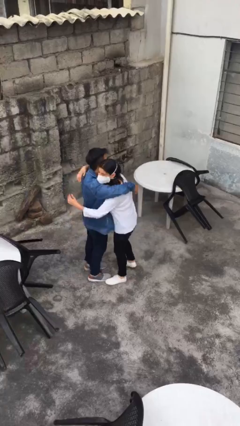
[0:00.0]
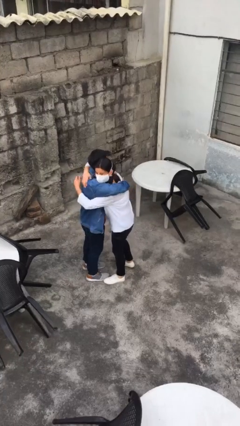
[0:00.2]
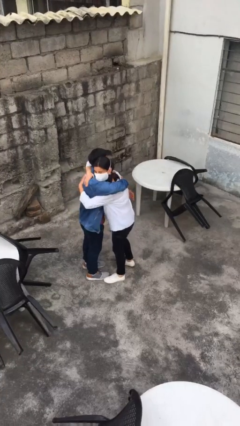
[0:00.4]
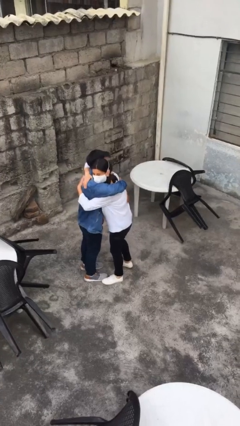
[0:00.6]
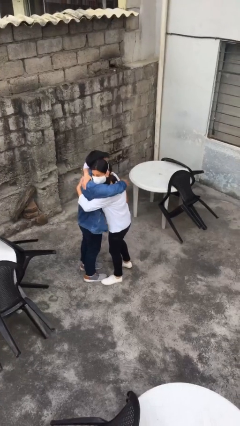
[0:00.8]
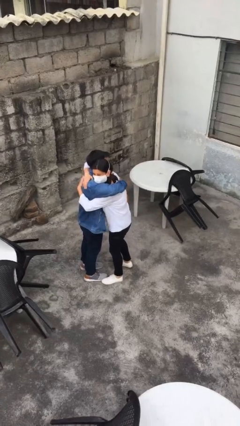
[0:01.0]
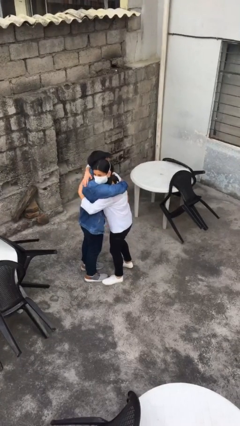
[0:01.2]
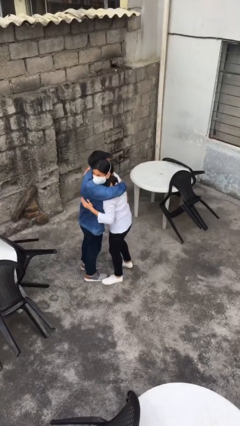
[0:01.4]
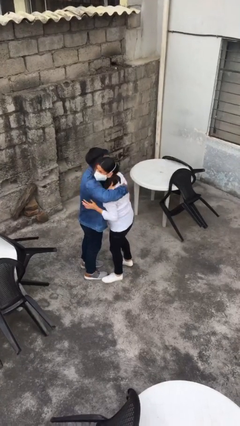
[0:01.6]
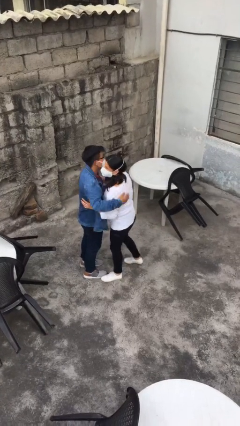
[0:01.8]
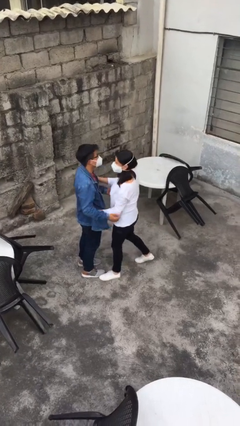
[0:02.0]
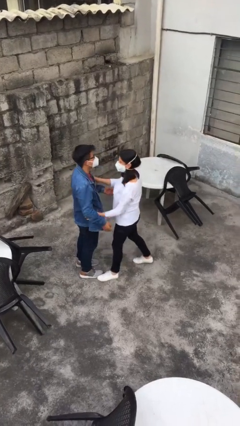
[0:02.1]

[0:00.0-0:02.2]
person embraces person

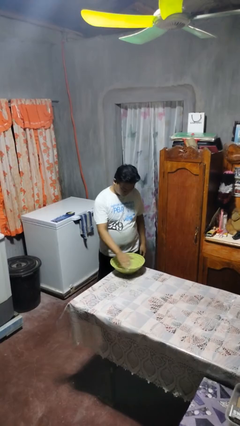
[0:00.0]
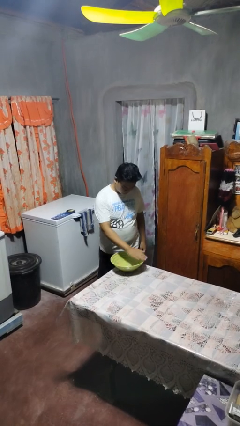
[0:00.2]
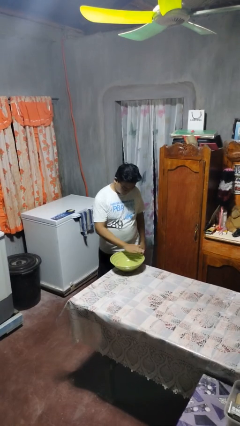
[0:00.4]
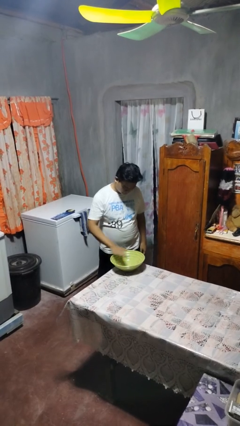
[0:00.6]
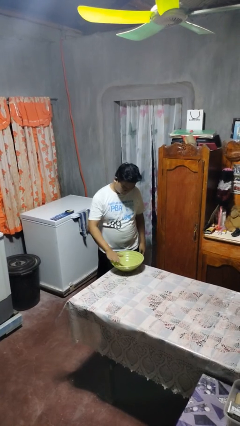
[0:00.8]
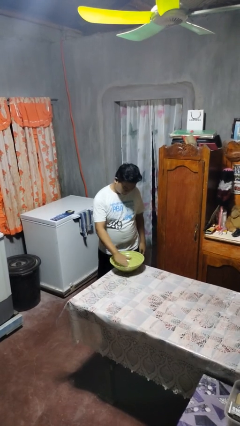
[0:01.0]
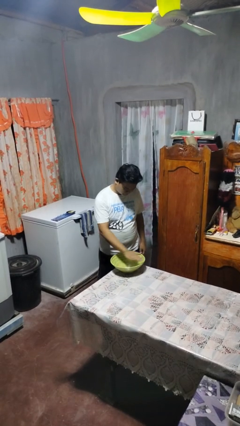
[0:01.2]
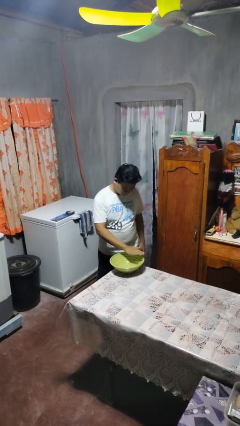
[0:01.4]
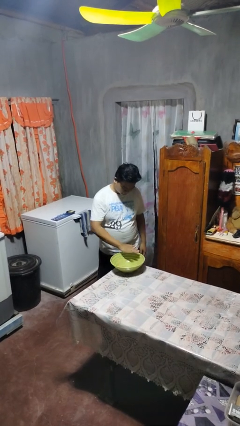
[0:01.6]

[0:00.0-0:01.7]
person waves hand over object

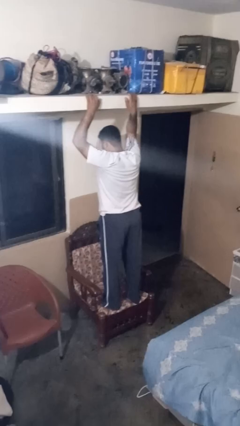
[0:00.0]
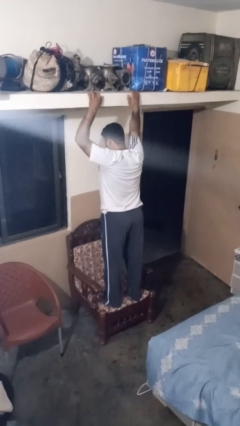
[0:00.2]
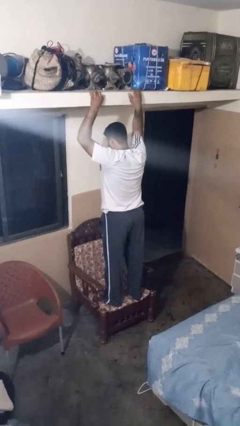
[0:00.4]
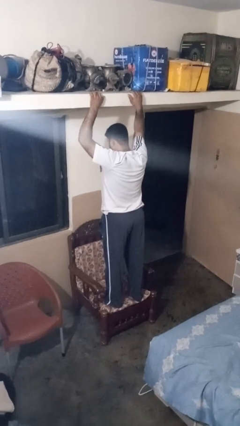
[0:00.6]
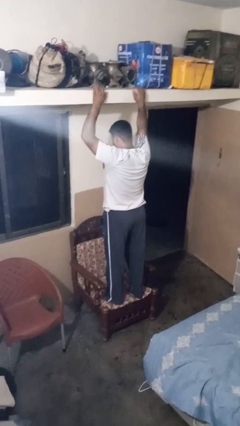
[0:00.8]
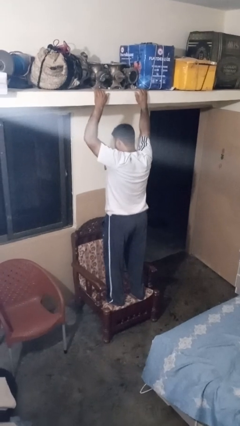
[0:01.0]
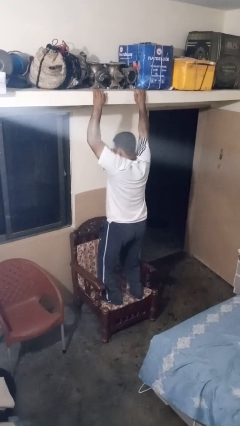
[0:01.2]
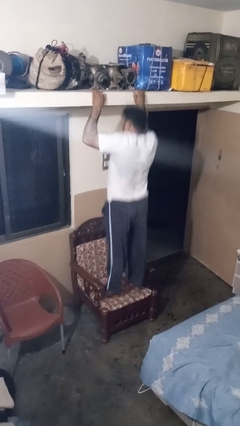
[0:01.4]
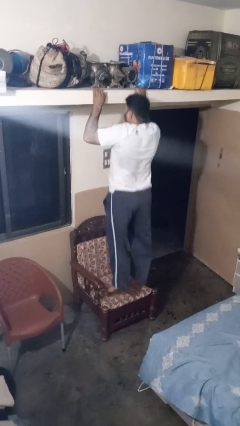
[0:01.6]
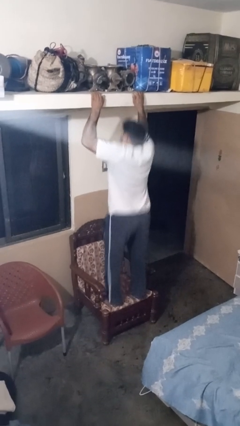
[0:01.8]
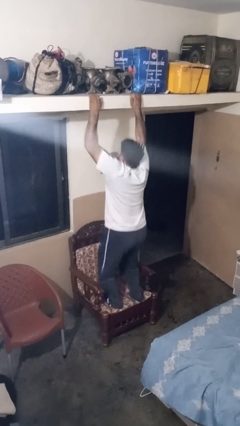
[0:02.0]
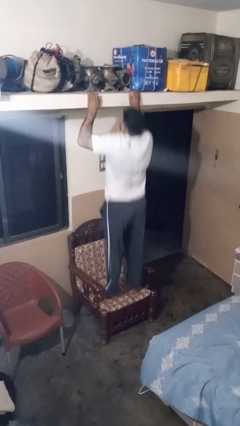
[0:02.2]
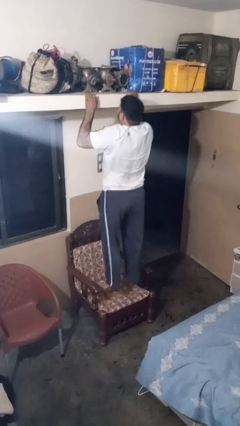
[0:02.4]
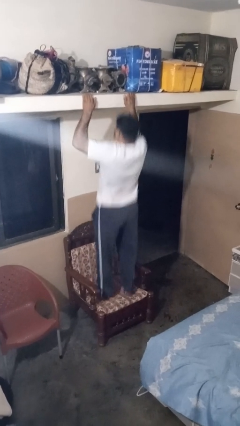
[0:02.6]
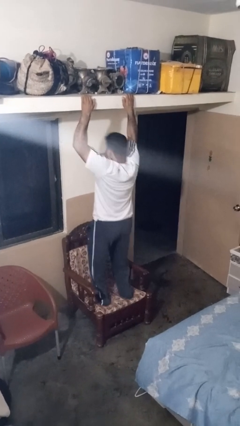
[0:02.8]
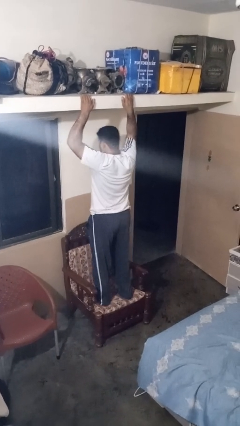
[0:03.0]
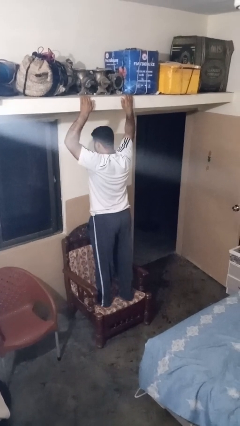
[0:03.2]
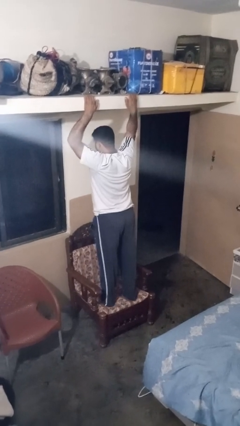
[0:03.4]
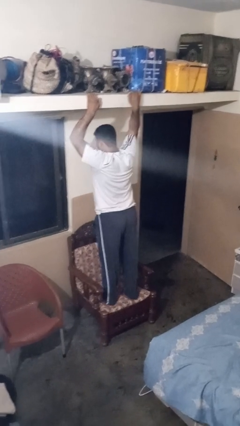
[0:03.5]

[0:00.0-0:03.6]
person jumps on couch

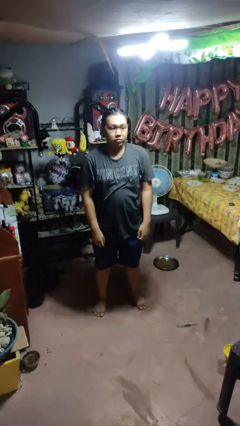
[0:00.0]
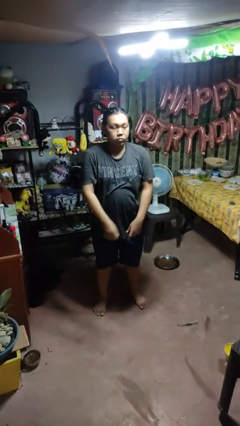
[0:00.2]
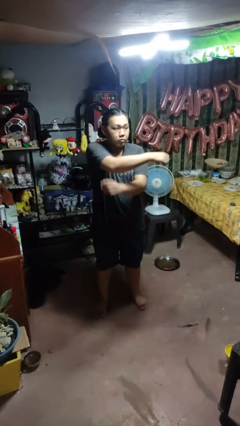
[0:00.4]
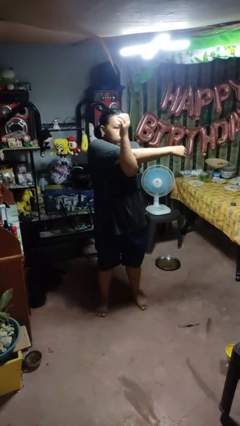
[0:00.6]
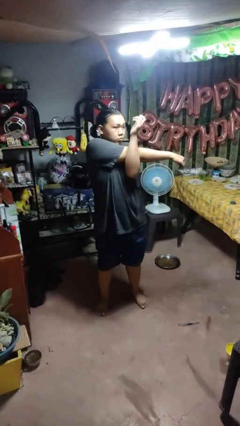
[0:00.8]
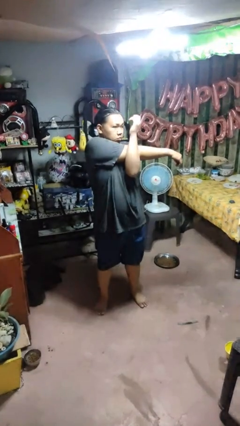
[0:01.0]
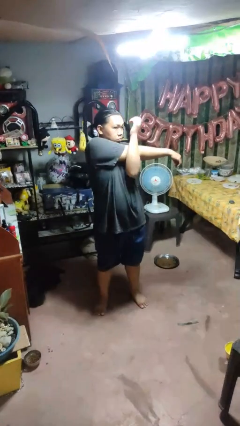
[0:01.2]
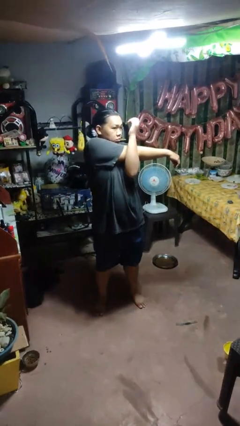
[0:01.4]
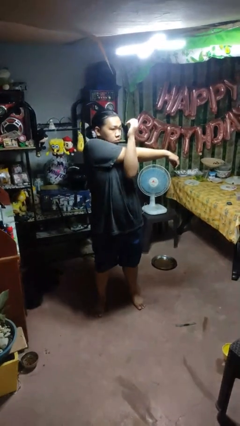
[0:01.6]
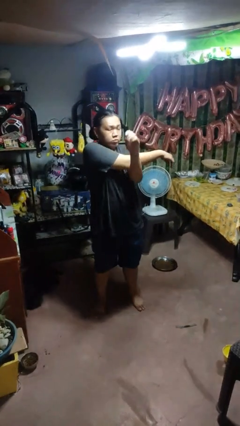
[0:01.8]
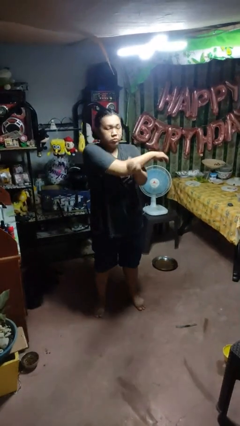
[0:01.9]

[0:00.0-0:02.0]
person crosses arms

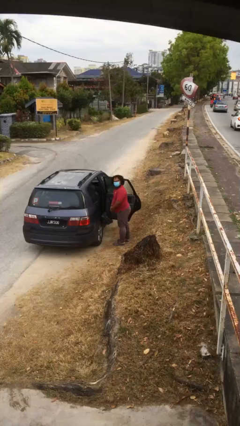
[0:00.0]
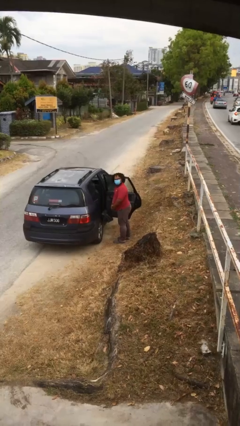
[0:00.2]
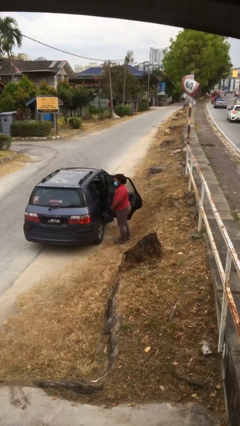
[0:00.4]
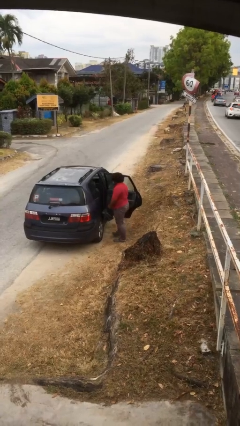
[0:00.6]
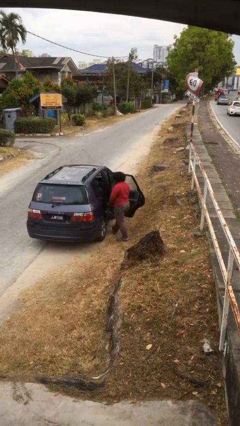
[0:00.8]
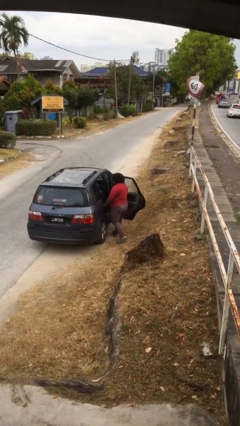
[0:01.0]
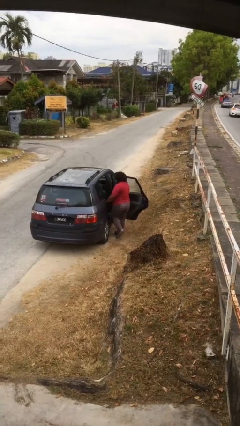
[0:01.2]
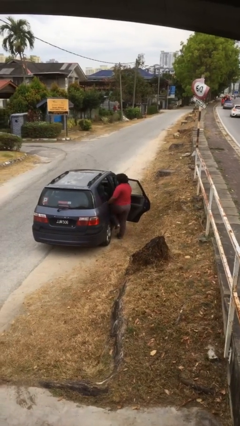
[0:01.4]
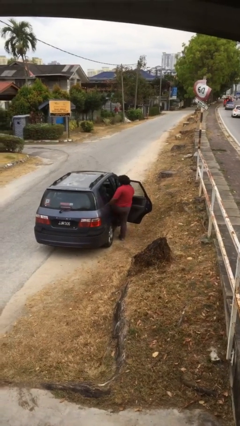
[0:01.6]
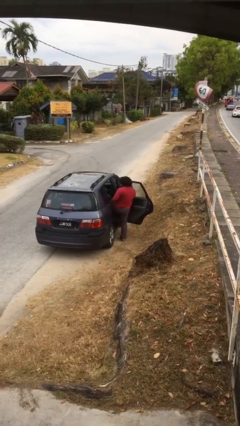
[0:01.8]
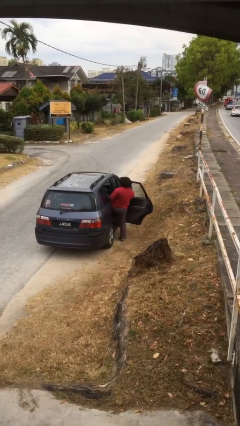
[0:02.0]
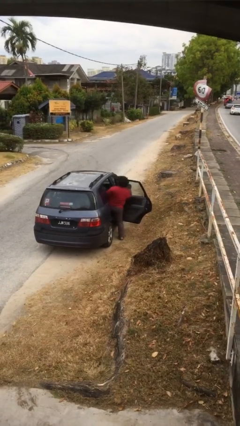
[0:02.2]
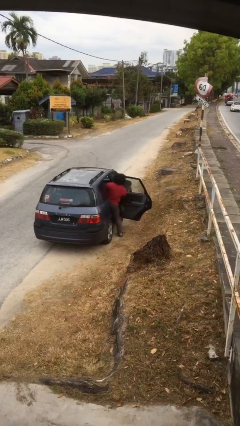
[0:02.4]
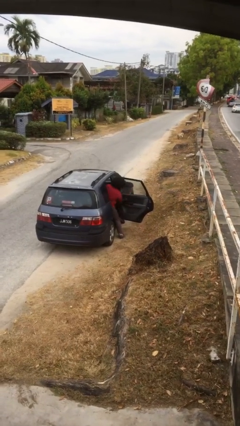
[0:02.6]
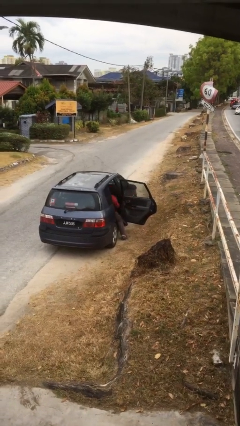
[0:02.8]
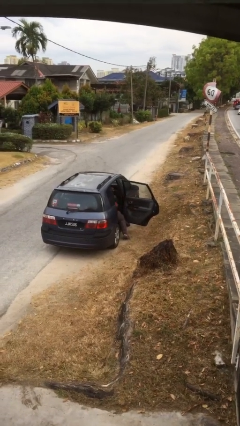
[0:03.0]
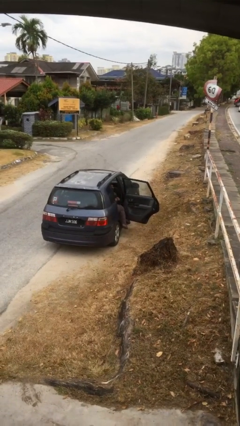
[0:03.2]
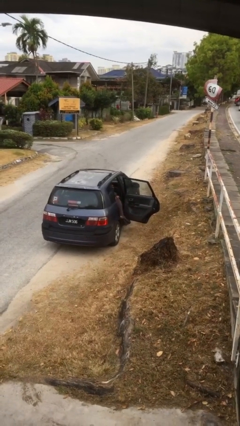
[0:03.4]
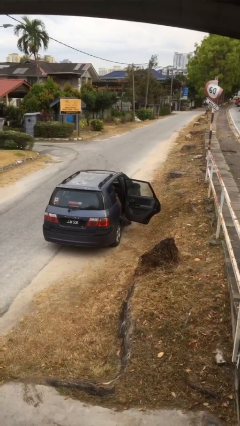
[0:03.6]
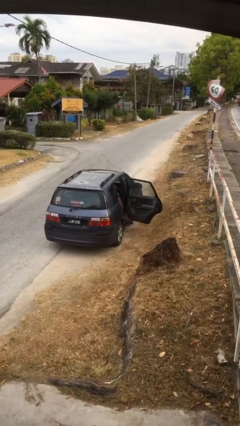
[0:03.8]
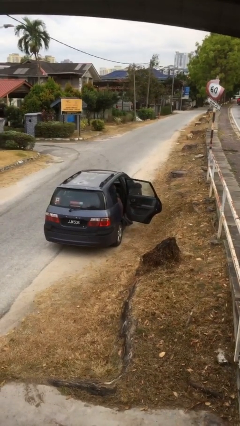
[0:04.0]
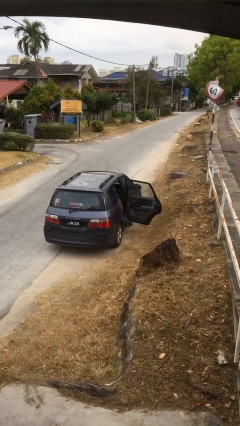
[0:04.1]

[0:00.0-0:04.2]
person enters car

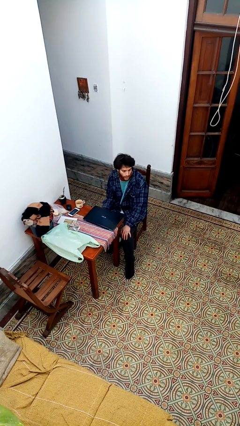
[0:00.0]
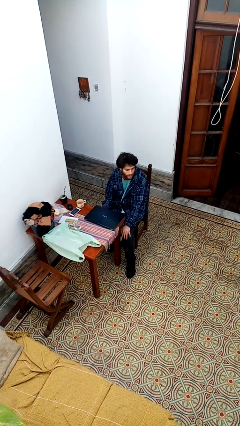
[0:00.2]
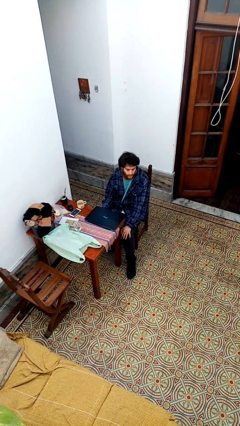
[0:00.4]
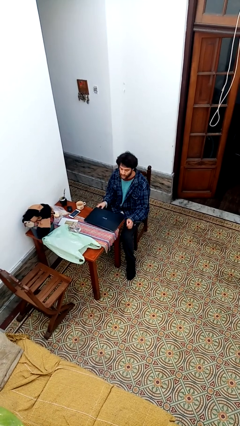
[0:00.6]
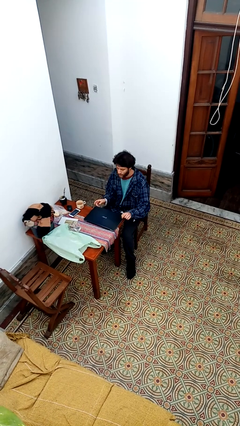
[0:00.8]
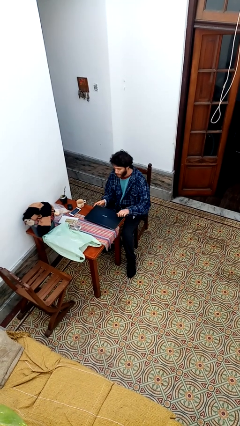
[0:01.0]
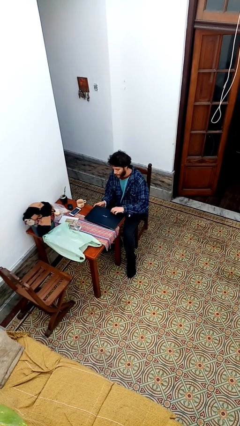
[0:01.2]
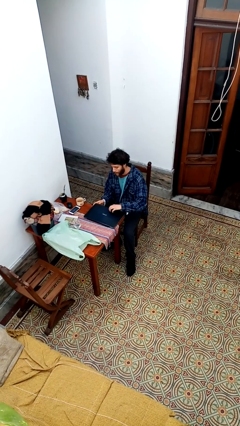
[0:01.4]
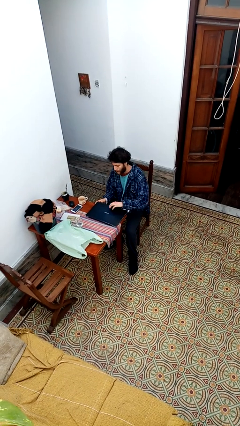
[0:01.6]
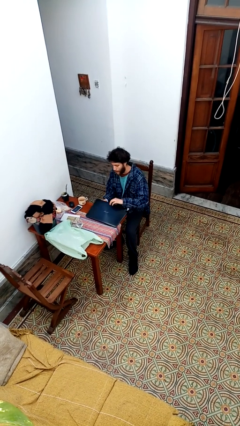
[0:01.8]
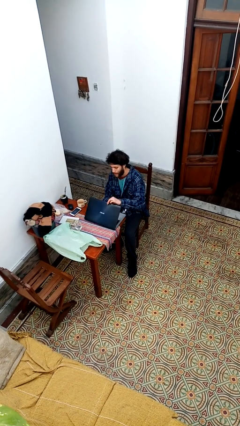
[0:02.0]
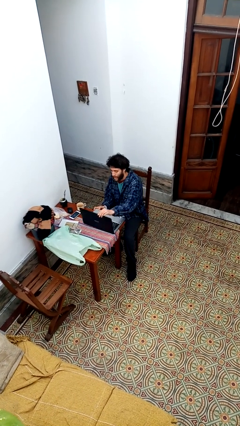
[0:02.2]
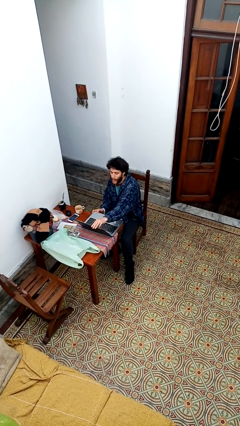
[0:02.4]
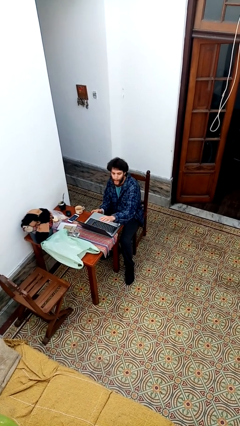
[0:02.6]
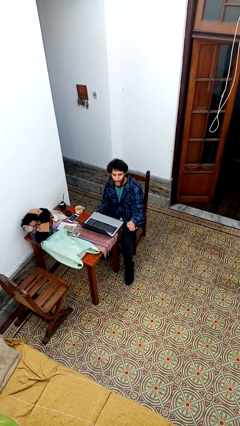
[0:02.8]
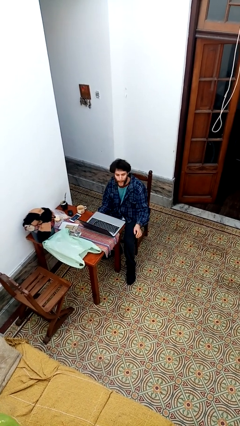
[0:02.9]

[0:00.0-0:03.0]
person opens laptop

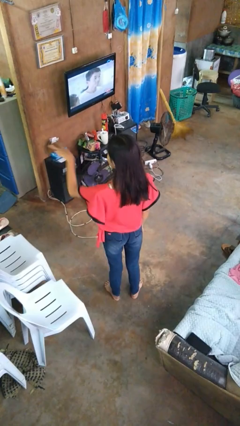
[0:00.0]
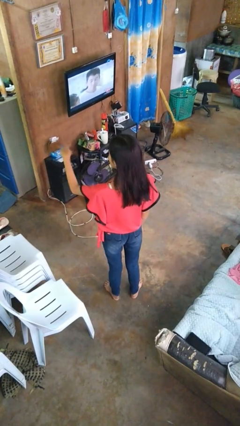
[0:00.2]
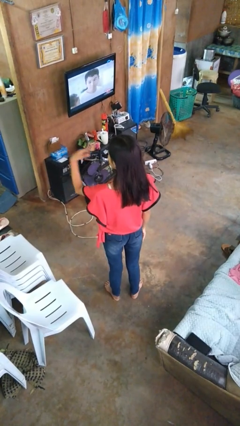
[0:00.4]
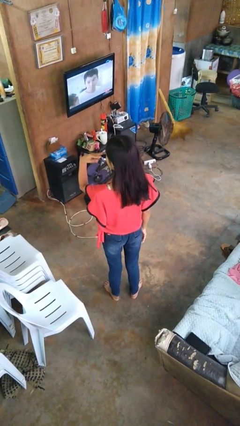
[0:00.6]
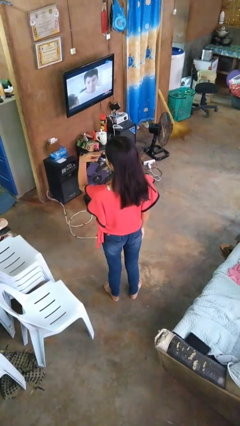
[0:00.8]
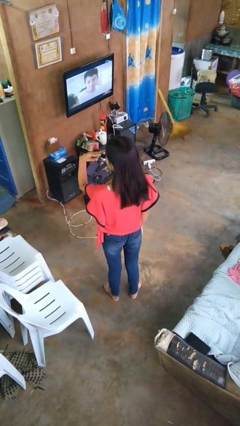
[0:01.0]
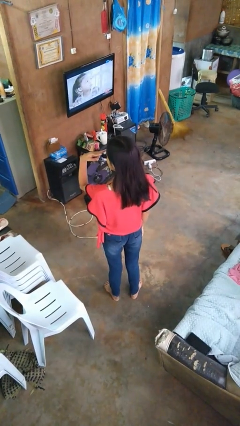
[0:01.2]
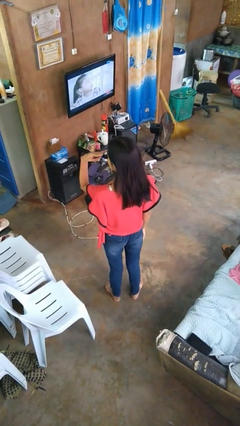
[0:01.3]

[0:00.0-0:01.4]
person gestures watch closely
